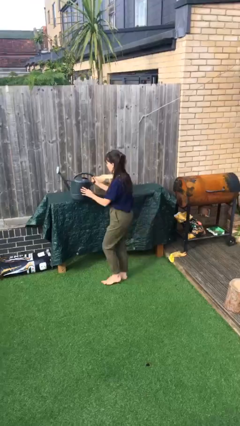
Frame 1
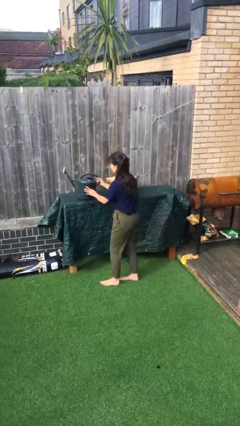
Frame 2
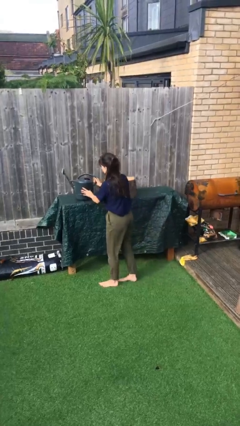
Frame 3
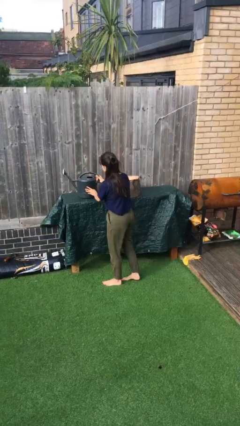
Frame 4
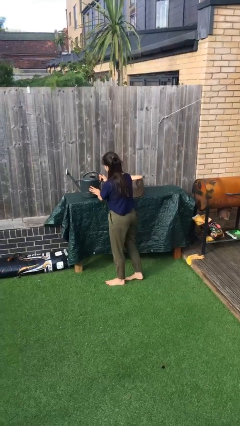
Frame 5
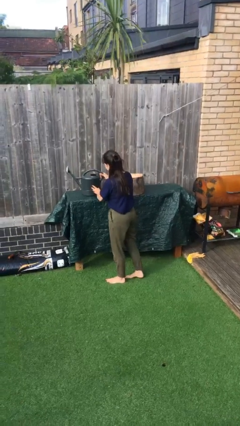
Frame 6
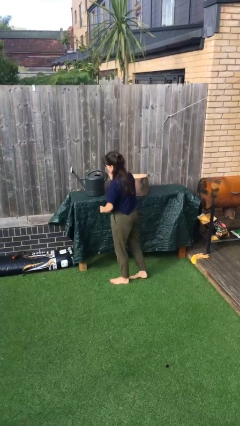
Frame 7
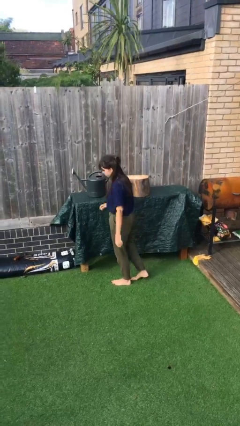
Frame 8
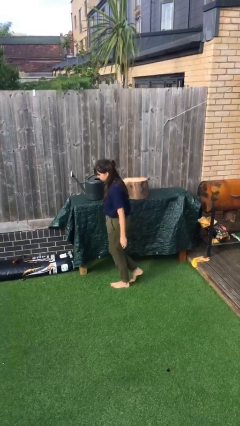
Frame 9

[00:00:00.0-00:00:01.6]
person puts down object on table

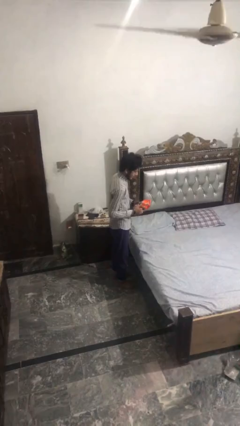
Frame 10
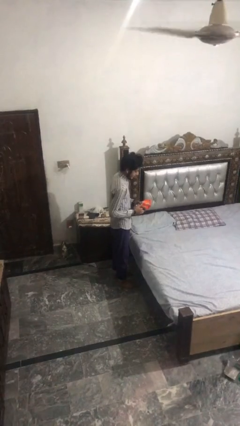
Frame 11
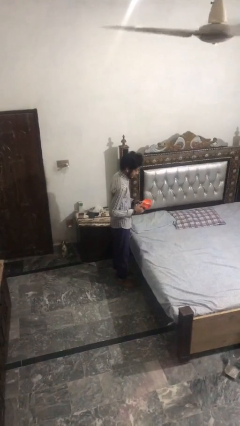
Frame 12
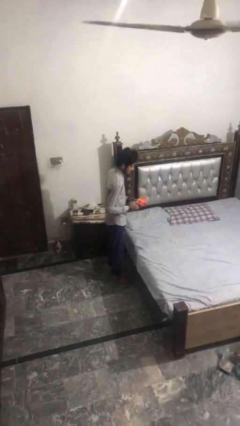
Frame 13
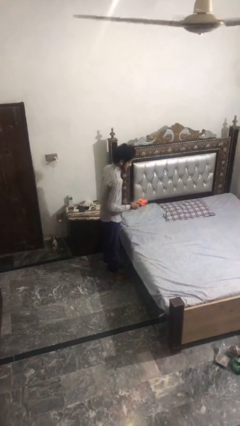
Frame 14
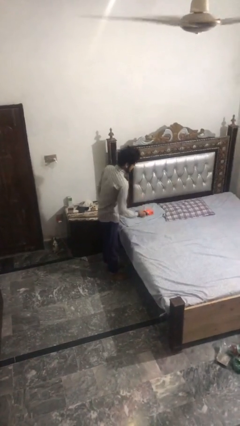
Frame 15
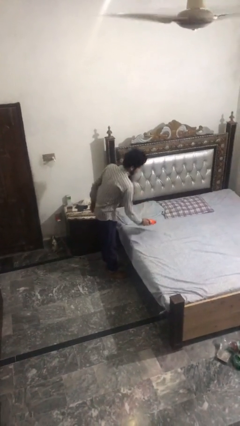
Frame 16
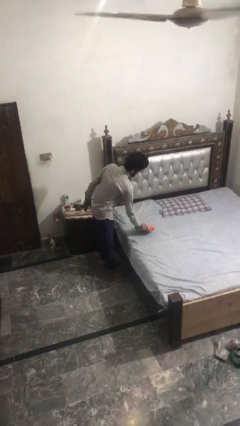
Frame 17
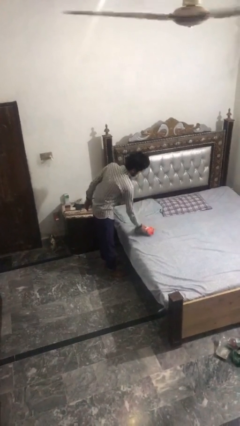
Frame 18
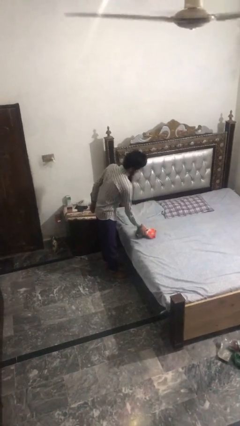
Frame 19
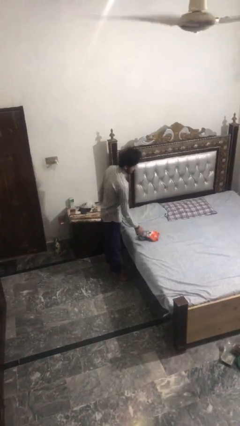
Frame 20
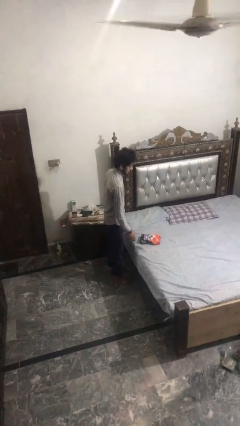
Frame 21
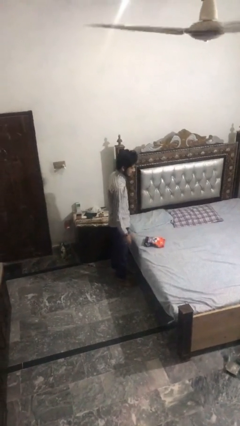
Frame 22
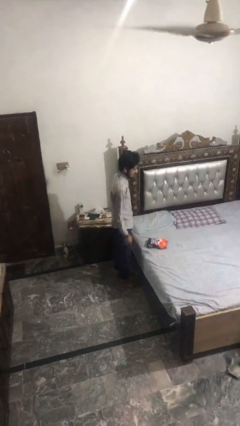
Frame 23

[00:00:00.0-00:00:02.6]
person puts down object on bed

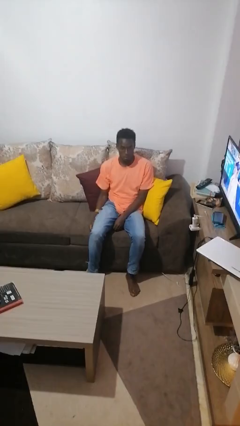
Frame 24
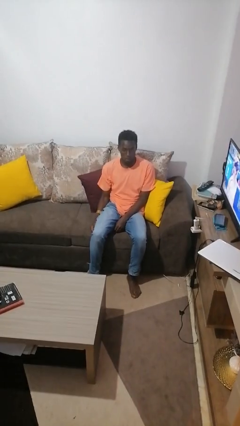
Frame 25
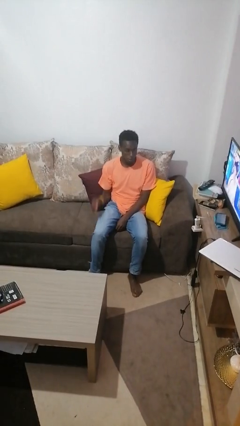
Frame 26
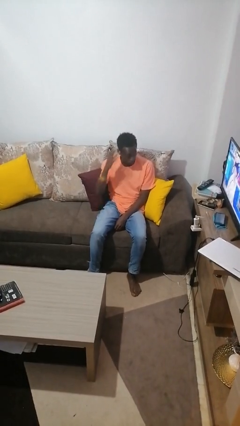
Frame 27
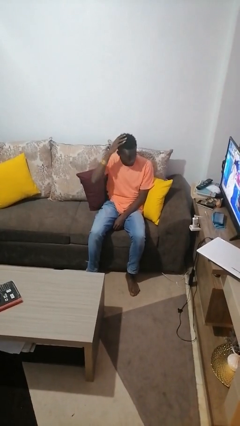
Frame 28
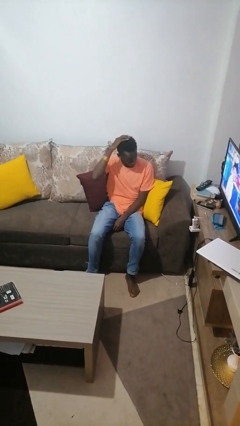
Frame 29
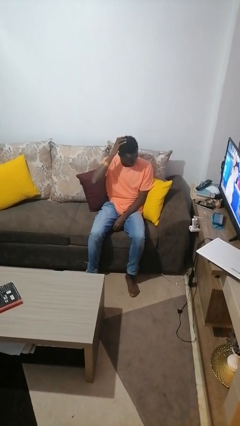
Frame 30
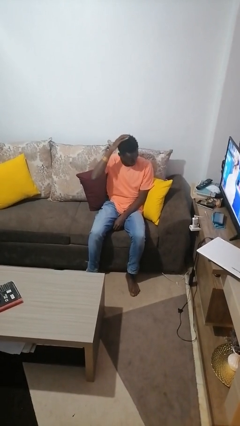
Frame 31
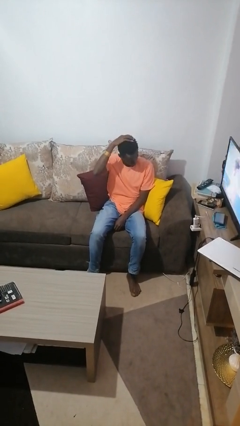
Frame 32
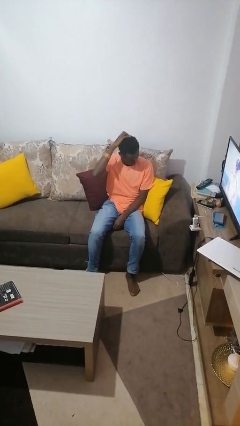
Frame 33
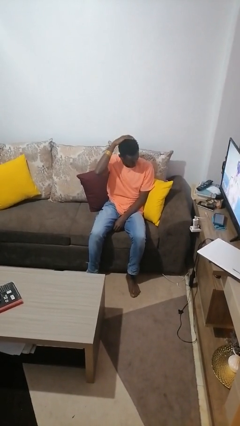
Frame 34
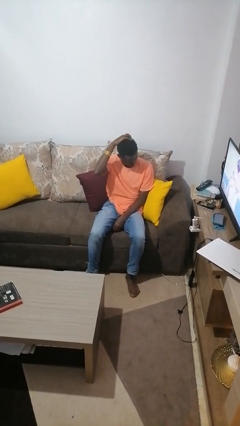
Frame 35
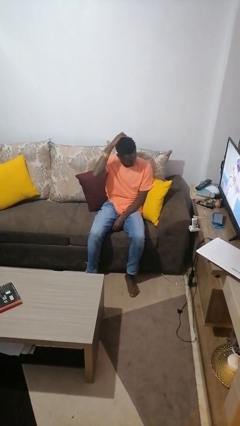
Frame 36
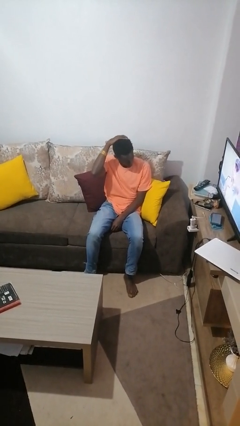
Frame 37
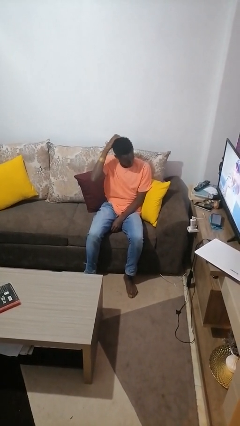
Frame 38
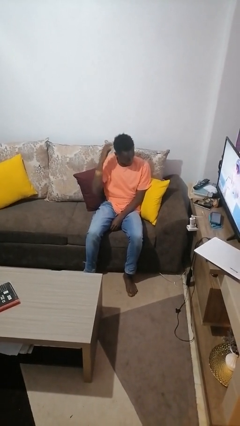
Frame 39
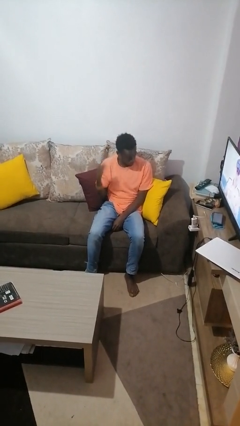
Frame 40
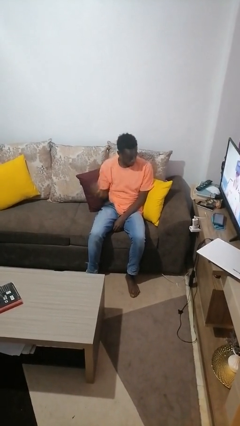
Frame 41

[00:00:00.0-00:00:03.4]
person strokes hair

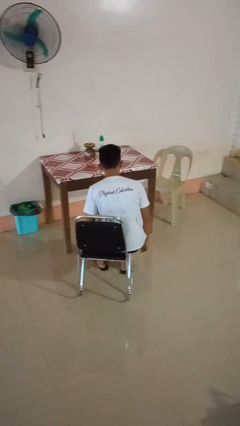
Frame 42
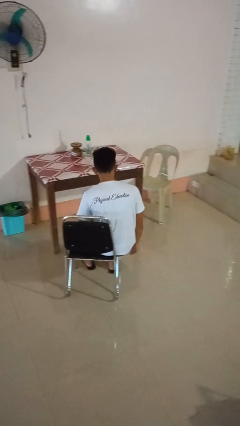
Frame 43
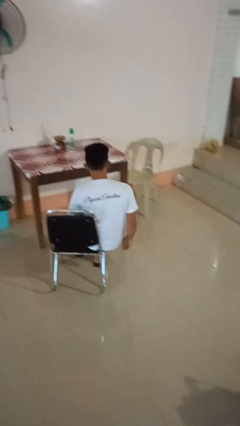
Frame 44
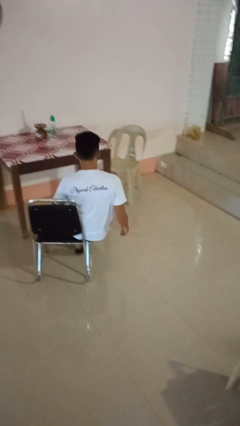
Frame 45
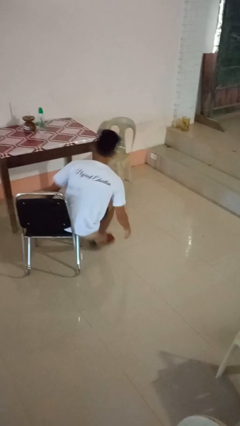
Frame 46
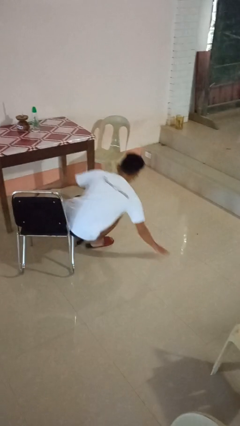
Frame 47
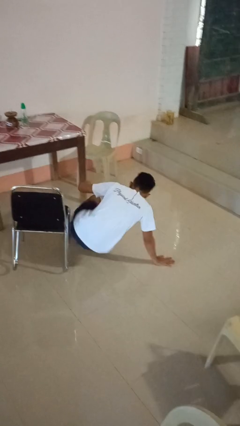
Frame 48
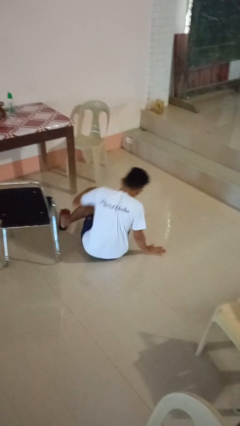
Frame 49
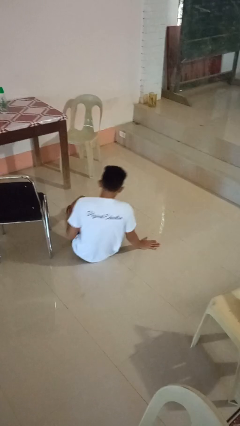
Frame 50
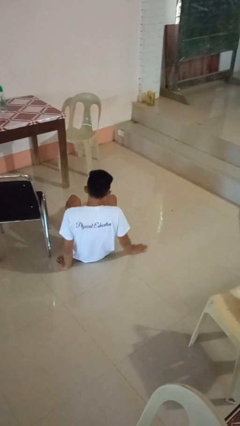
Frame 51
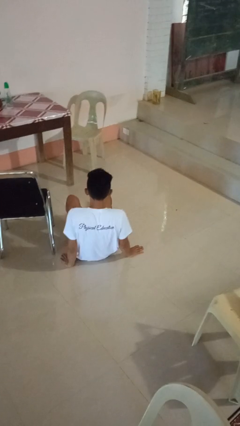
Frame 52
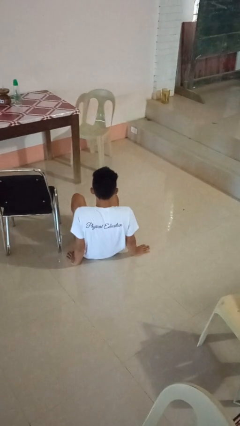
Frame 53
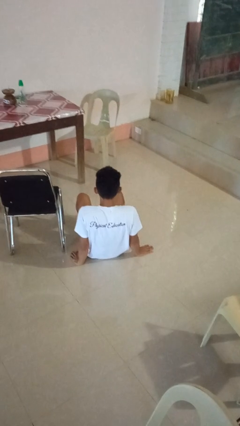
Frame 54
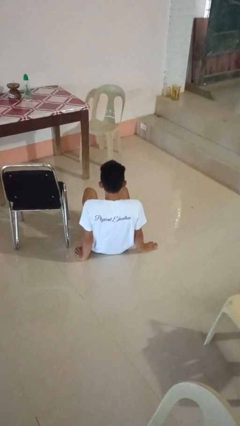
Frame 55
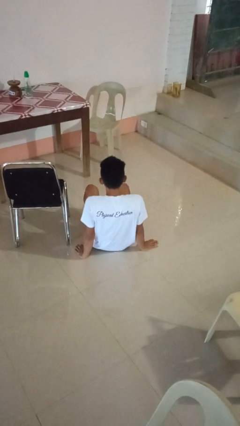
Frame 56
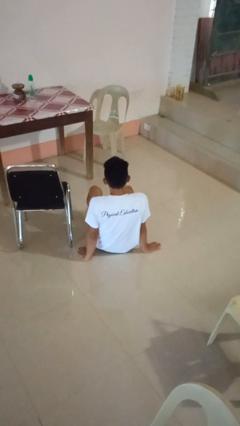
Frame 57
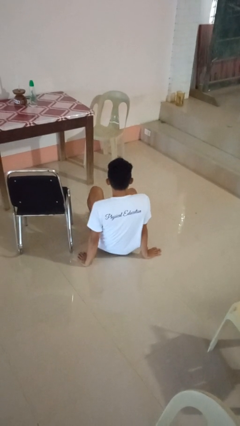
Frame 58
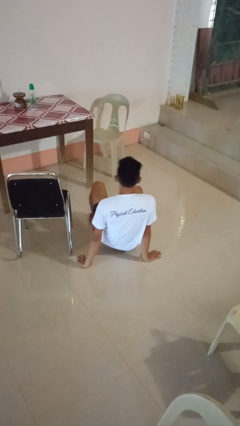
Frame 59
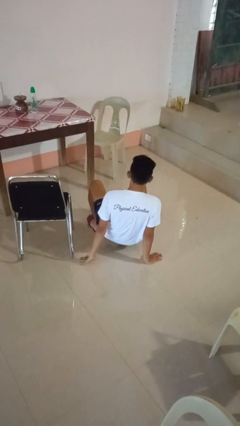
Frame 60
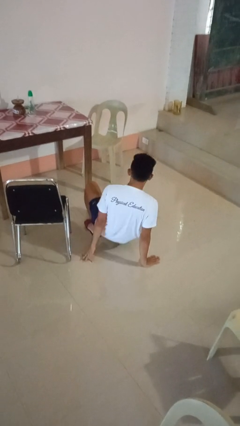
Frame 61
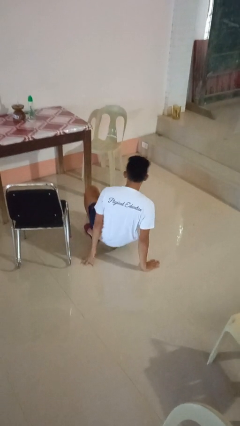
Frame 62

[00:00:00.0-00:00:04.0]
person falls from chair

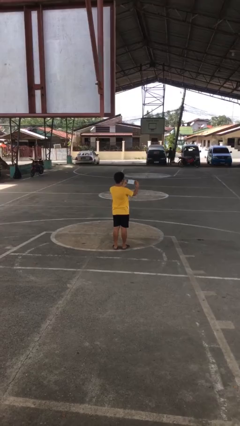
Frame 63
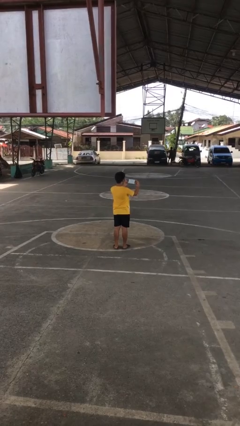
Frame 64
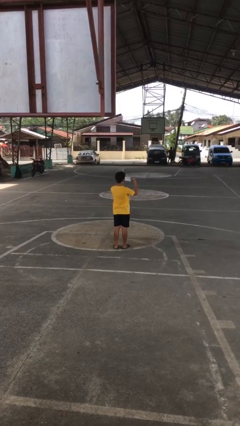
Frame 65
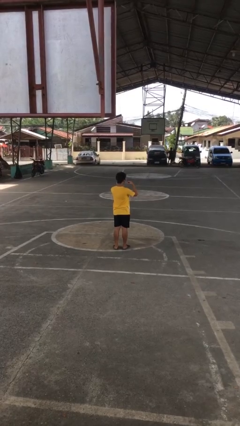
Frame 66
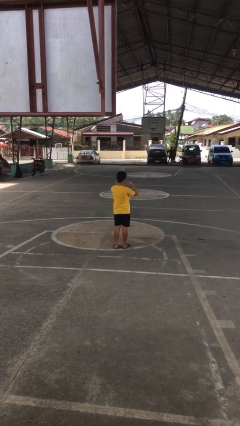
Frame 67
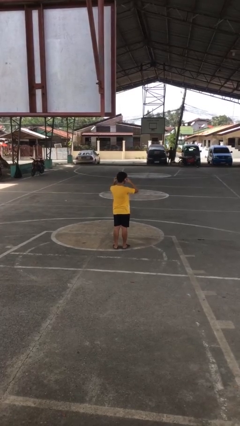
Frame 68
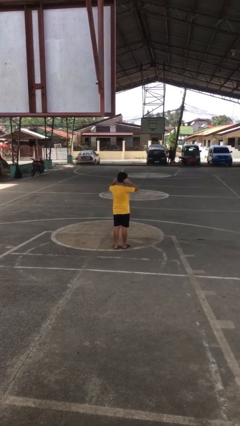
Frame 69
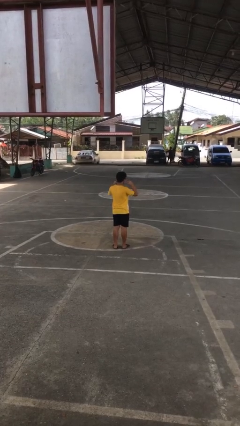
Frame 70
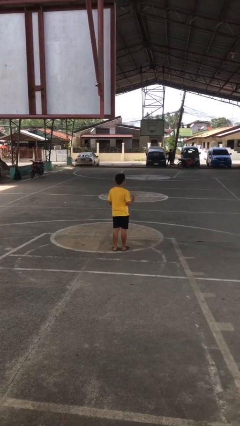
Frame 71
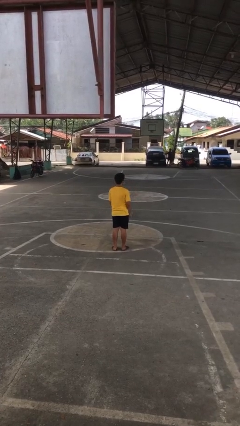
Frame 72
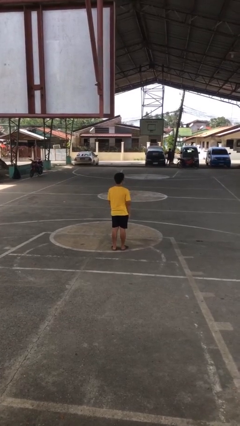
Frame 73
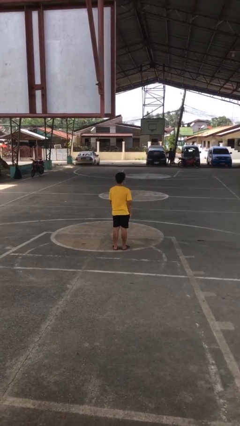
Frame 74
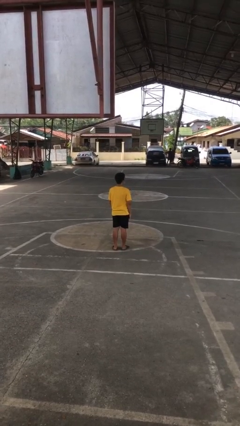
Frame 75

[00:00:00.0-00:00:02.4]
person puts on facemask

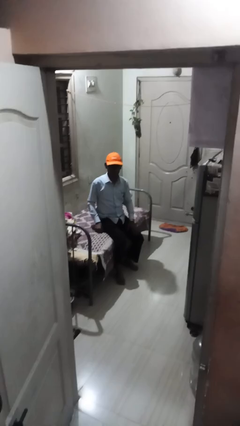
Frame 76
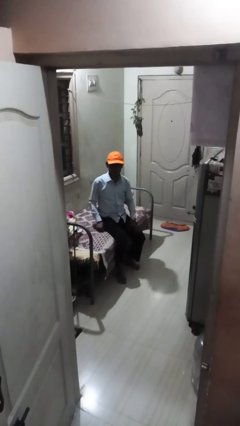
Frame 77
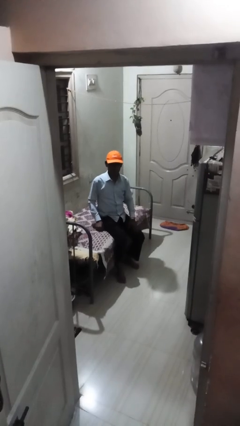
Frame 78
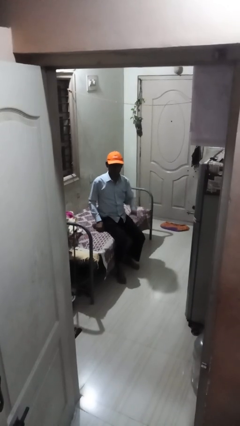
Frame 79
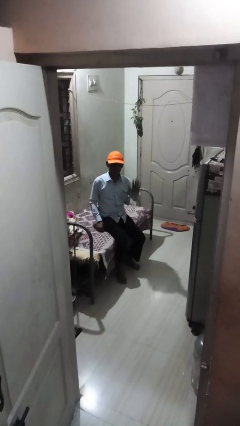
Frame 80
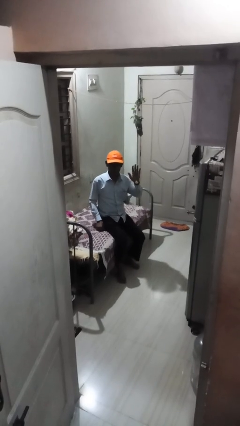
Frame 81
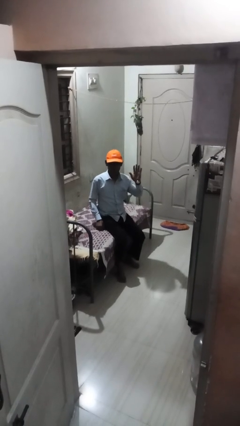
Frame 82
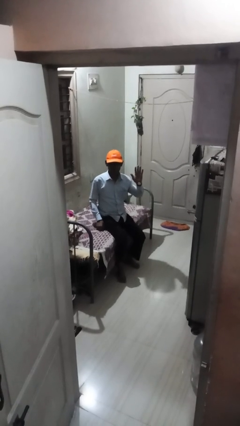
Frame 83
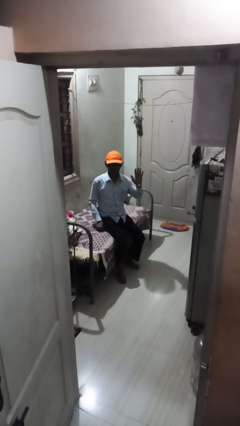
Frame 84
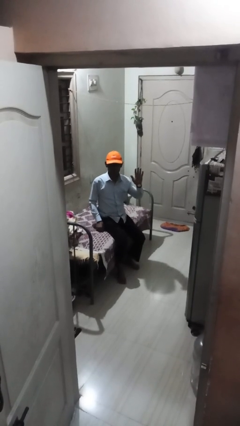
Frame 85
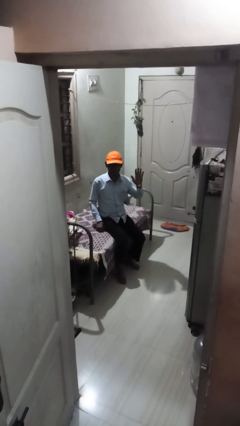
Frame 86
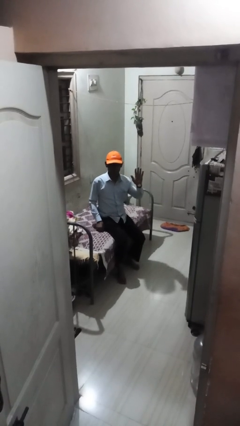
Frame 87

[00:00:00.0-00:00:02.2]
person gestures number five

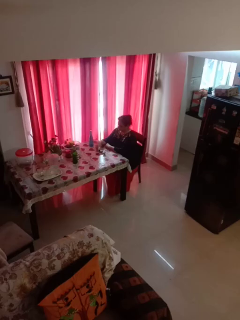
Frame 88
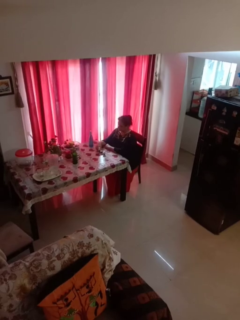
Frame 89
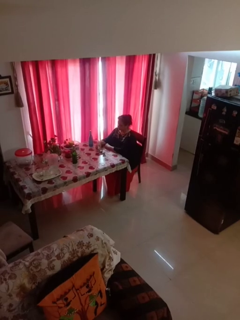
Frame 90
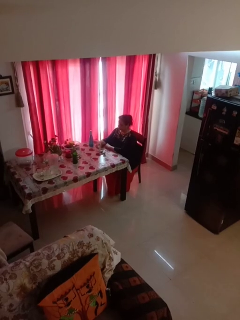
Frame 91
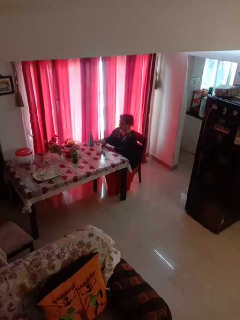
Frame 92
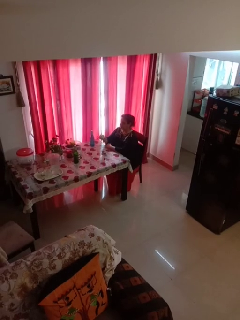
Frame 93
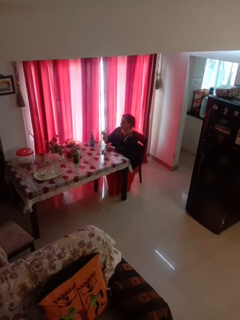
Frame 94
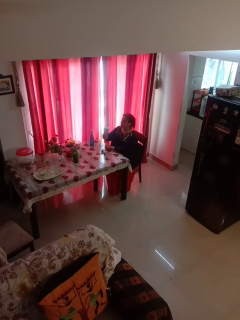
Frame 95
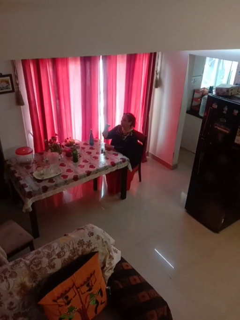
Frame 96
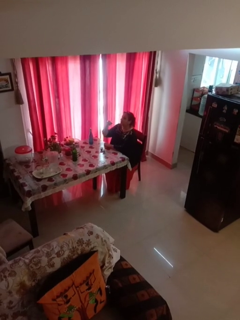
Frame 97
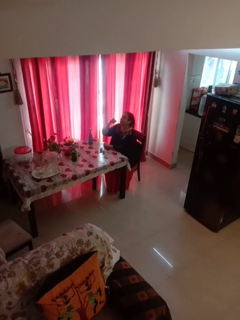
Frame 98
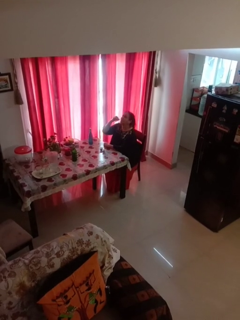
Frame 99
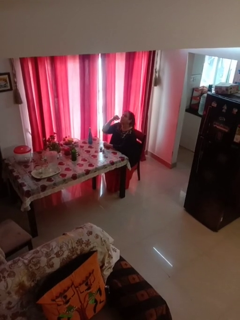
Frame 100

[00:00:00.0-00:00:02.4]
person picks up object from table
